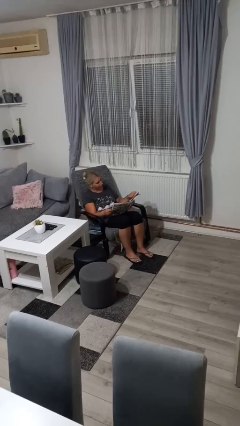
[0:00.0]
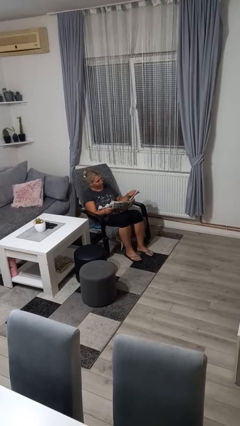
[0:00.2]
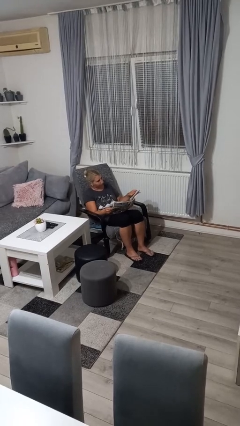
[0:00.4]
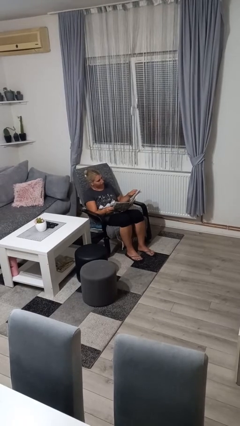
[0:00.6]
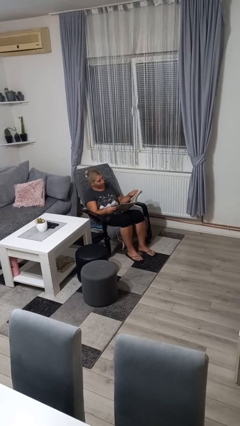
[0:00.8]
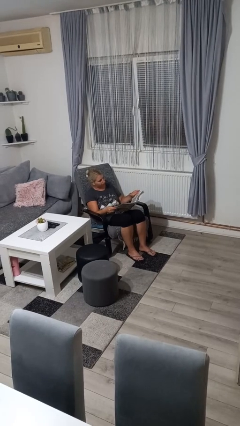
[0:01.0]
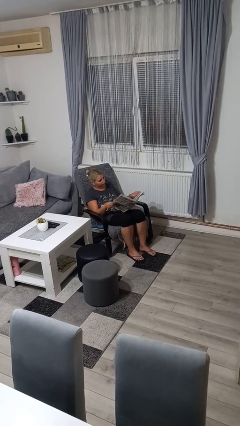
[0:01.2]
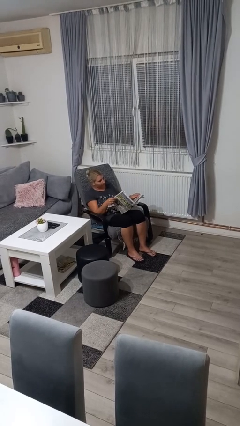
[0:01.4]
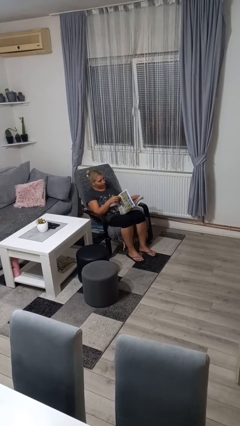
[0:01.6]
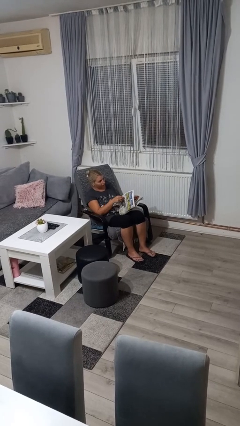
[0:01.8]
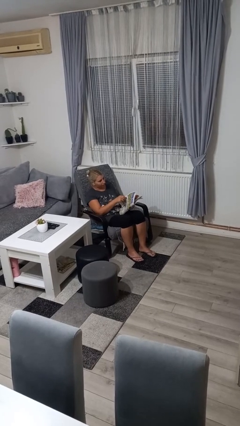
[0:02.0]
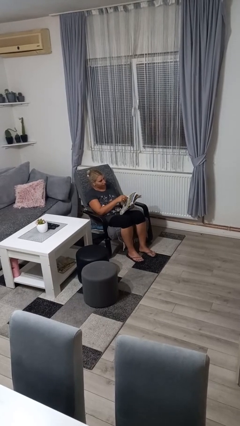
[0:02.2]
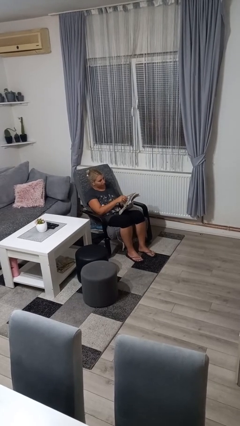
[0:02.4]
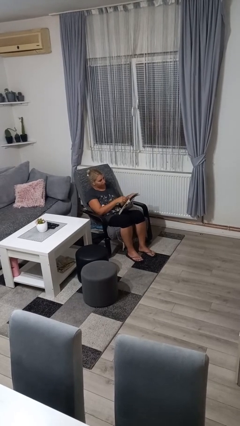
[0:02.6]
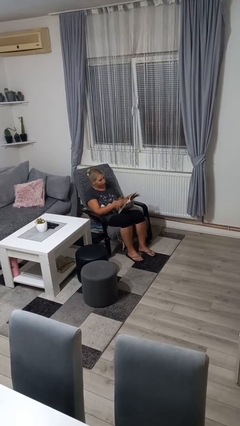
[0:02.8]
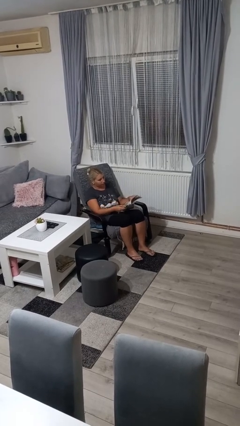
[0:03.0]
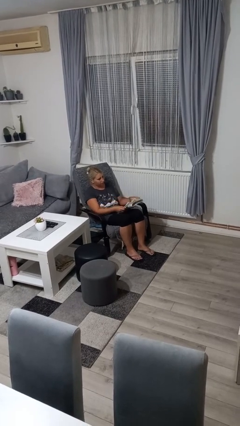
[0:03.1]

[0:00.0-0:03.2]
person reads newspaper

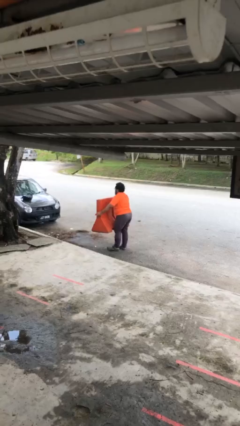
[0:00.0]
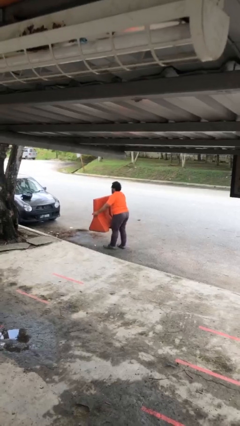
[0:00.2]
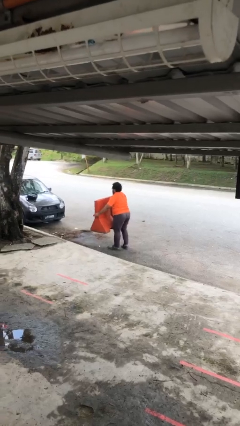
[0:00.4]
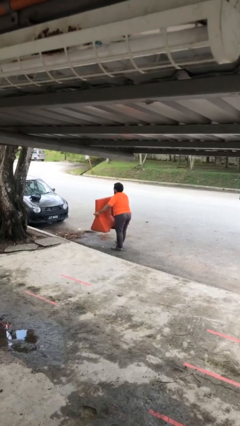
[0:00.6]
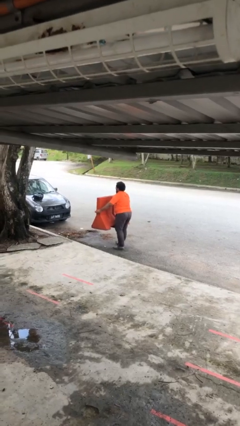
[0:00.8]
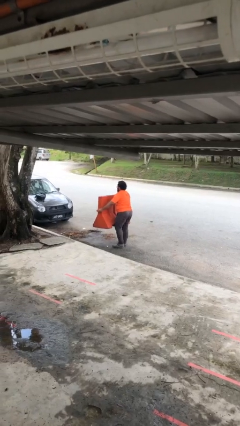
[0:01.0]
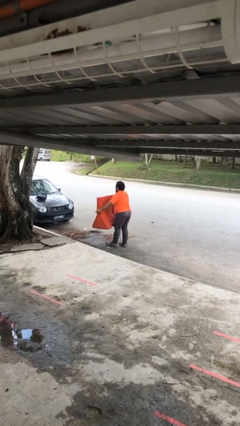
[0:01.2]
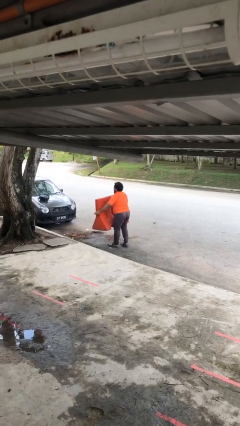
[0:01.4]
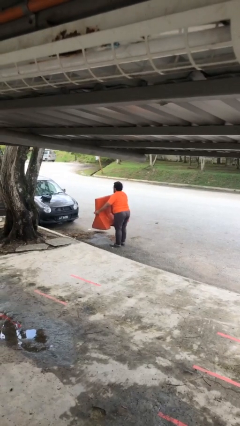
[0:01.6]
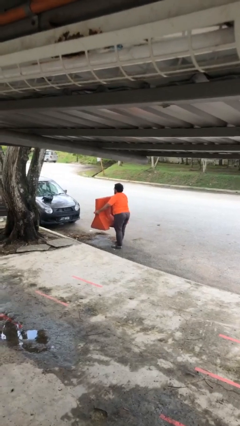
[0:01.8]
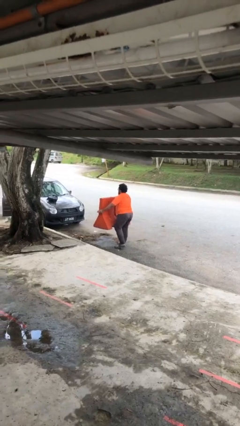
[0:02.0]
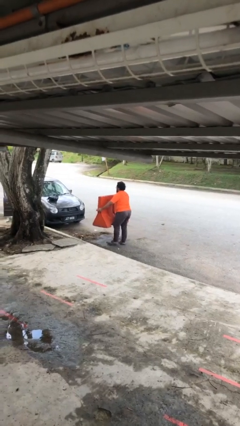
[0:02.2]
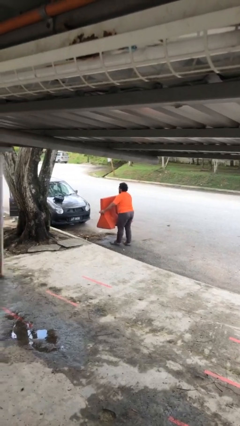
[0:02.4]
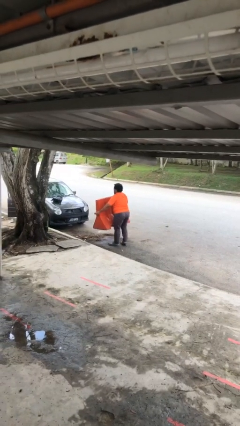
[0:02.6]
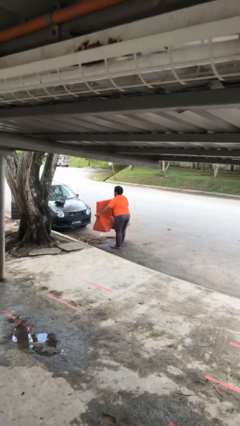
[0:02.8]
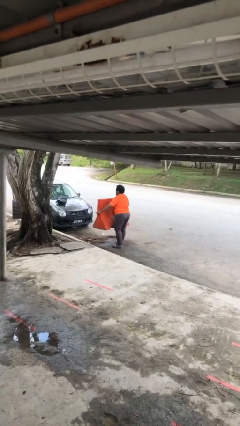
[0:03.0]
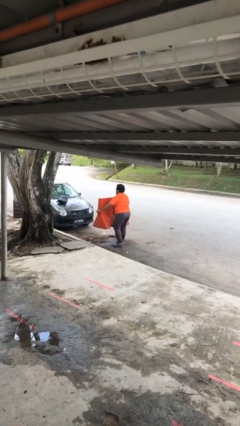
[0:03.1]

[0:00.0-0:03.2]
person carries heavy object

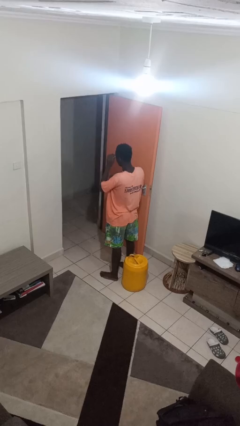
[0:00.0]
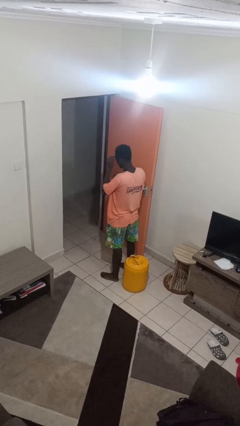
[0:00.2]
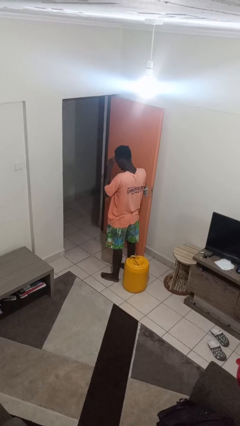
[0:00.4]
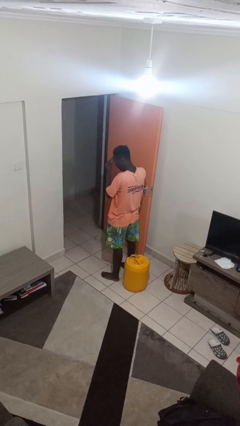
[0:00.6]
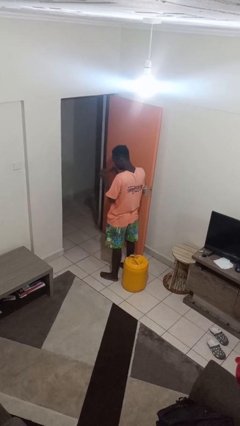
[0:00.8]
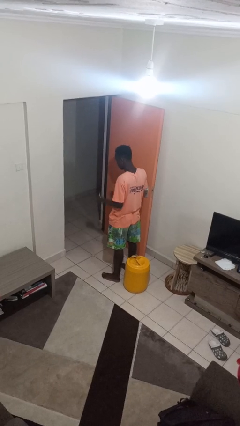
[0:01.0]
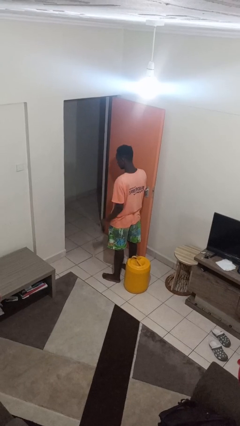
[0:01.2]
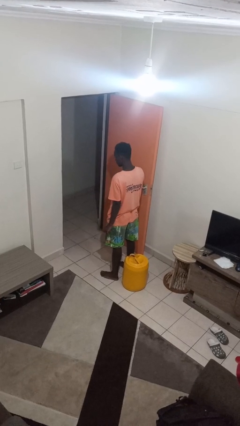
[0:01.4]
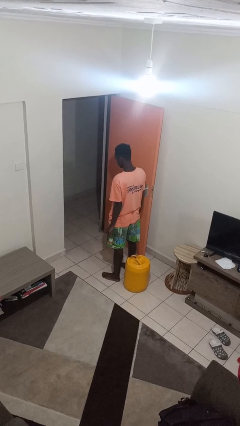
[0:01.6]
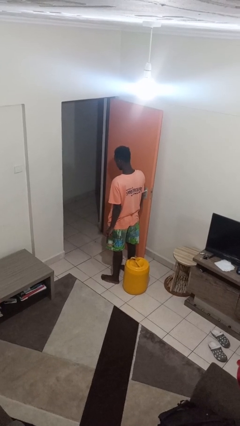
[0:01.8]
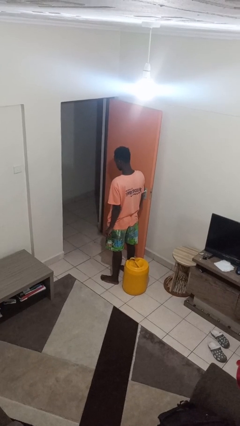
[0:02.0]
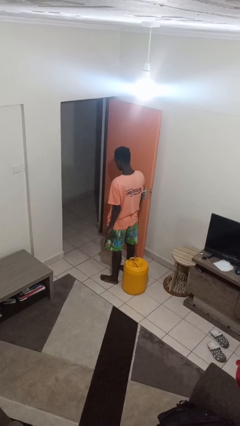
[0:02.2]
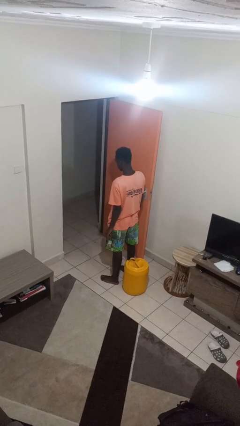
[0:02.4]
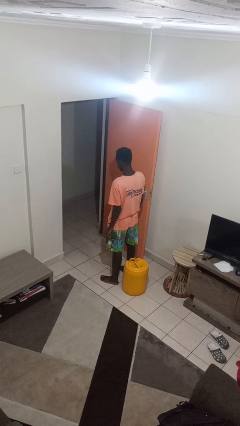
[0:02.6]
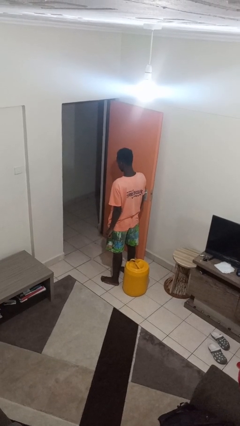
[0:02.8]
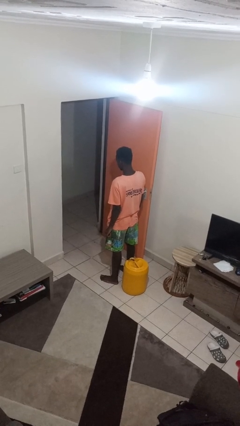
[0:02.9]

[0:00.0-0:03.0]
person takes off glasses

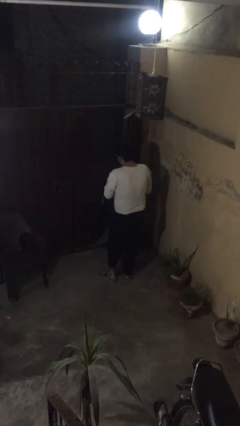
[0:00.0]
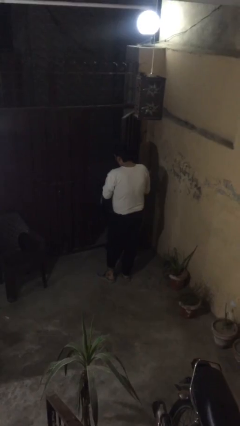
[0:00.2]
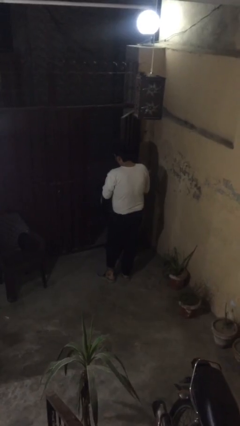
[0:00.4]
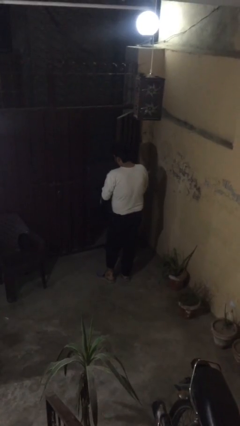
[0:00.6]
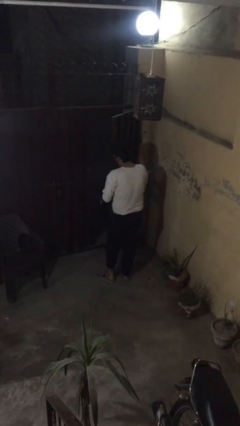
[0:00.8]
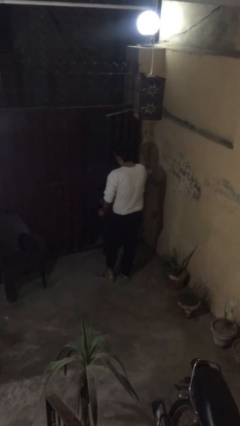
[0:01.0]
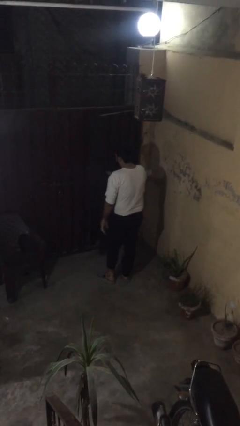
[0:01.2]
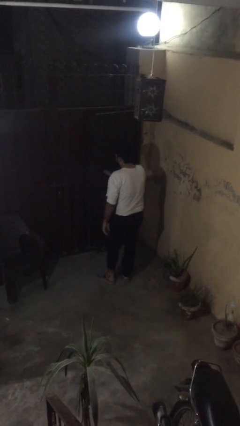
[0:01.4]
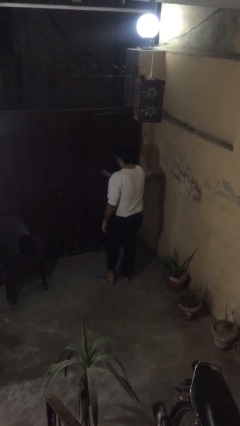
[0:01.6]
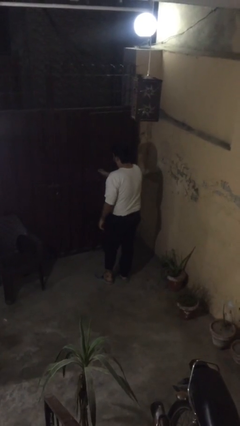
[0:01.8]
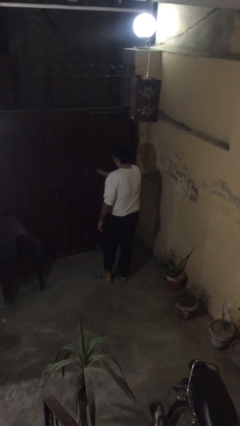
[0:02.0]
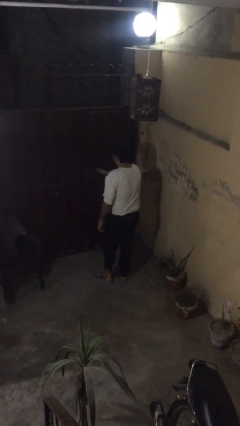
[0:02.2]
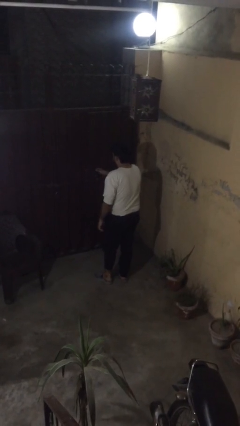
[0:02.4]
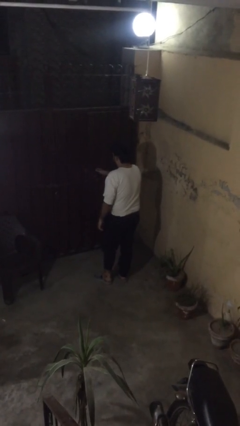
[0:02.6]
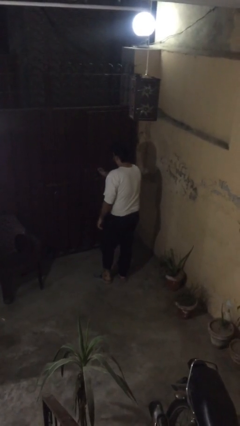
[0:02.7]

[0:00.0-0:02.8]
person closes facility door

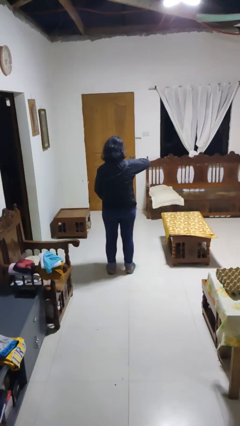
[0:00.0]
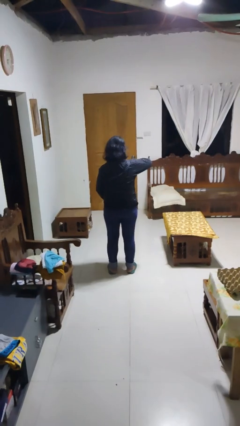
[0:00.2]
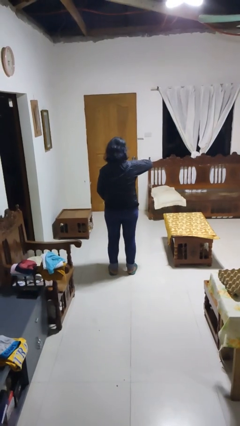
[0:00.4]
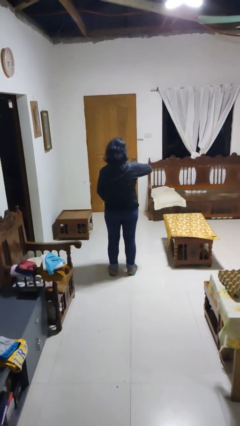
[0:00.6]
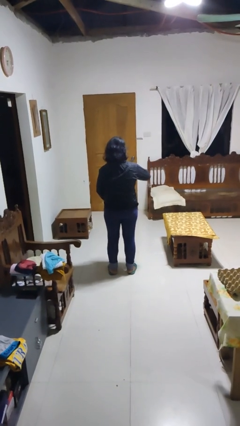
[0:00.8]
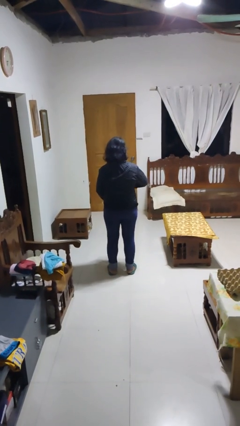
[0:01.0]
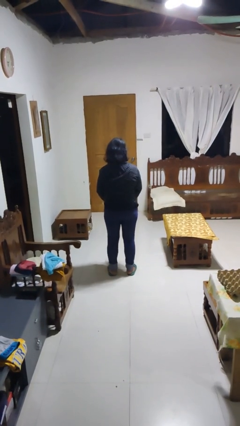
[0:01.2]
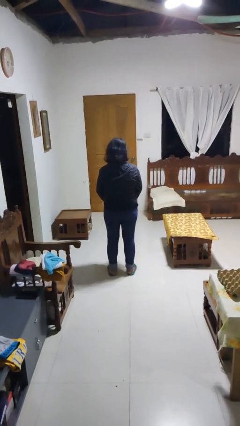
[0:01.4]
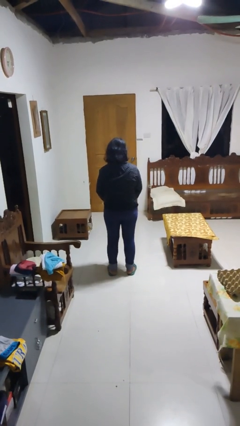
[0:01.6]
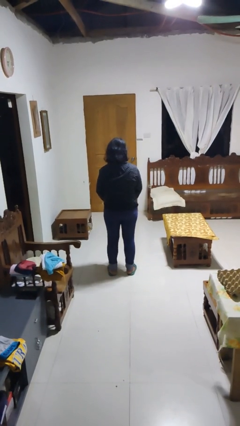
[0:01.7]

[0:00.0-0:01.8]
person unzips jacket

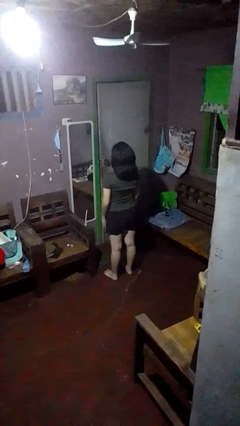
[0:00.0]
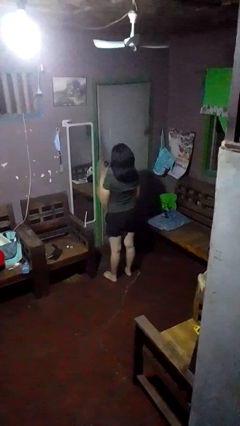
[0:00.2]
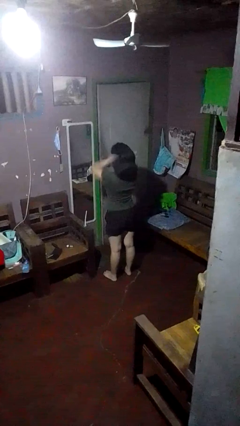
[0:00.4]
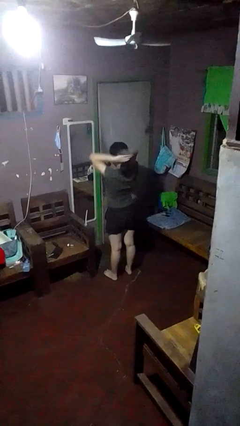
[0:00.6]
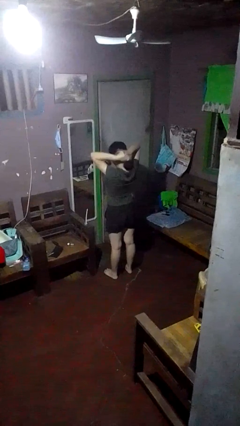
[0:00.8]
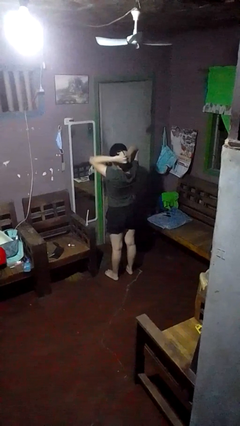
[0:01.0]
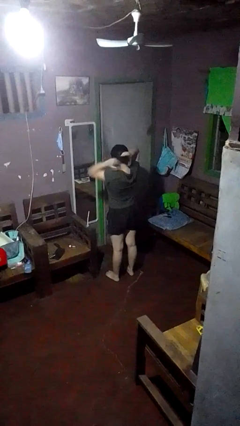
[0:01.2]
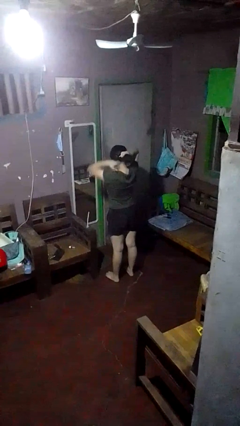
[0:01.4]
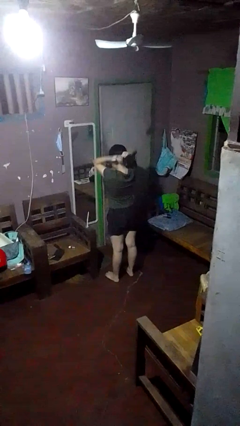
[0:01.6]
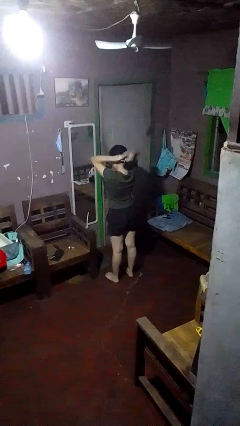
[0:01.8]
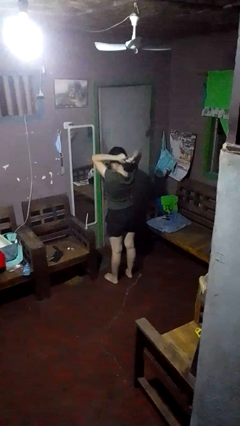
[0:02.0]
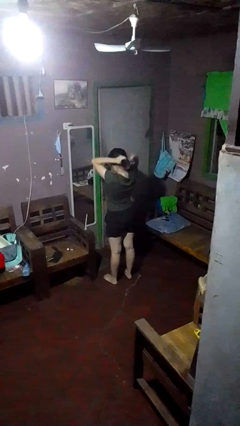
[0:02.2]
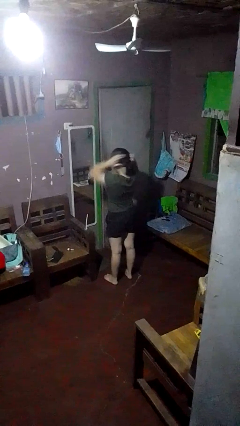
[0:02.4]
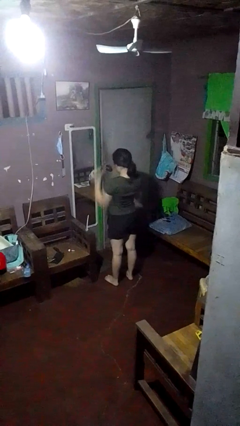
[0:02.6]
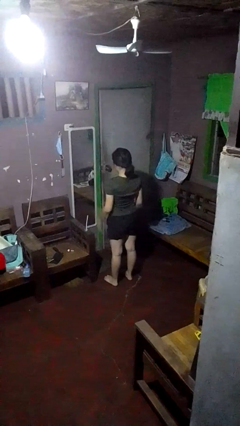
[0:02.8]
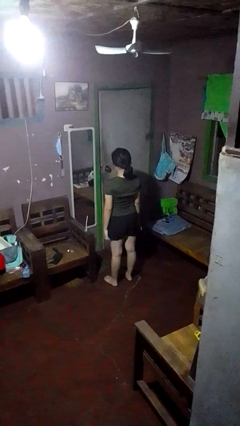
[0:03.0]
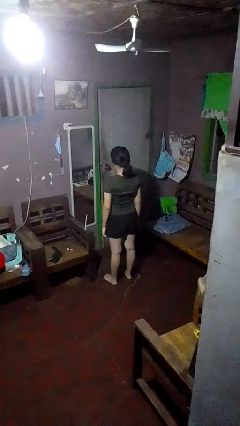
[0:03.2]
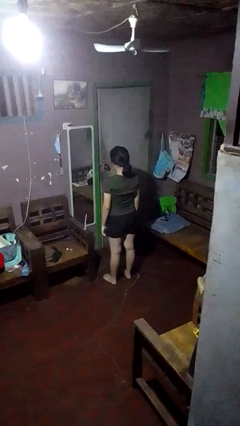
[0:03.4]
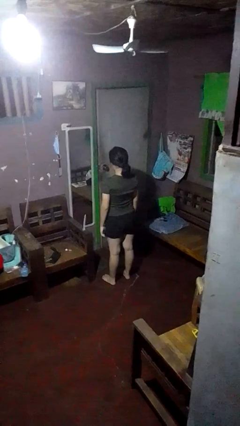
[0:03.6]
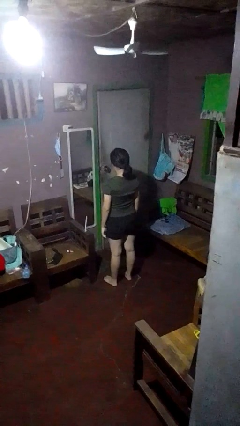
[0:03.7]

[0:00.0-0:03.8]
person puts hair in ponytail
